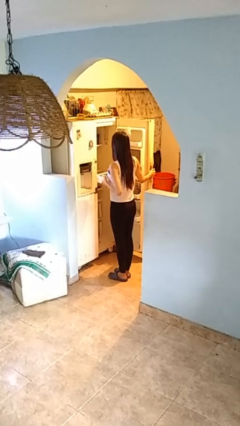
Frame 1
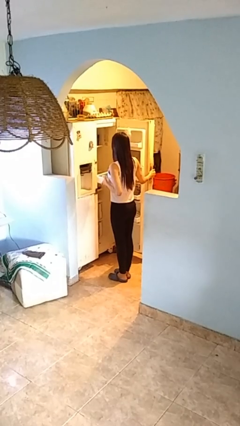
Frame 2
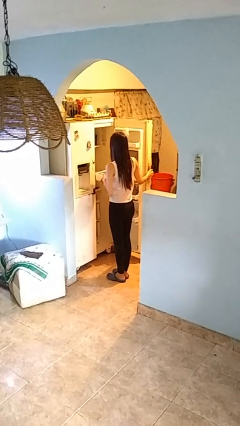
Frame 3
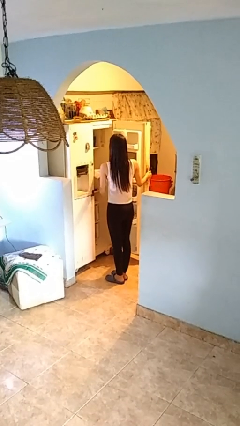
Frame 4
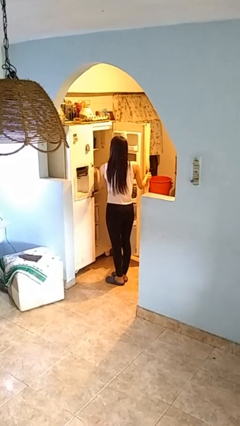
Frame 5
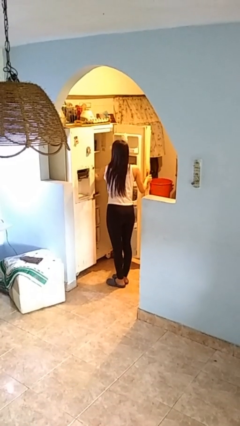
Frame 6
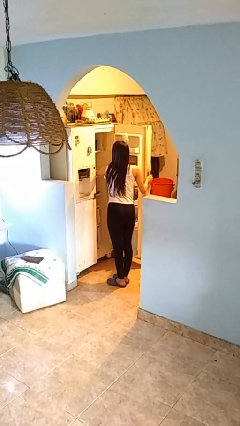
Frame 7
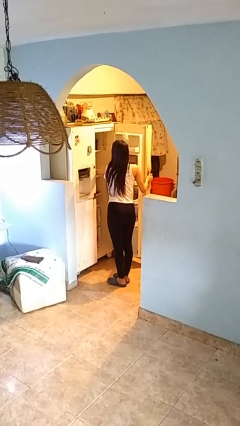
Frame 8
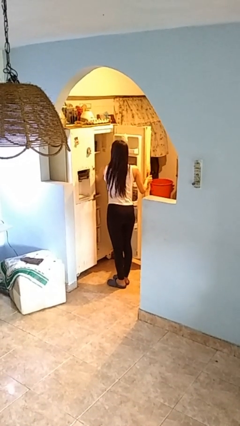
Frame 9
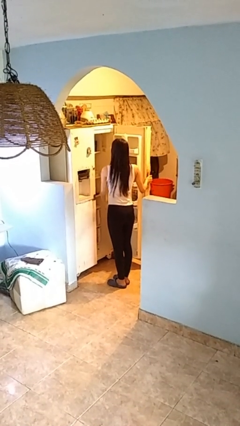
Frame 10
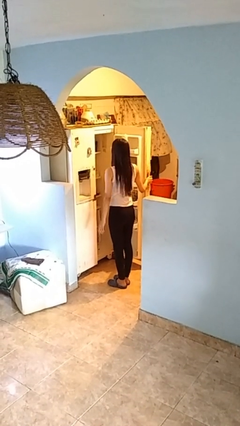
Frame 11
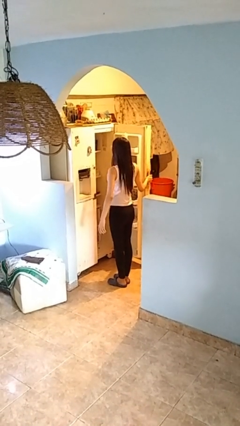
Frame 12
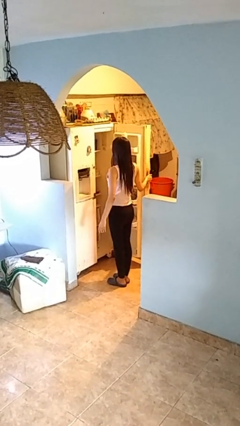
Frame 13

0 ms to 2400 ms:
person puts object into refrigerator

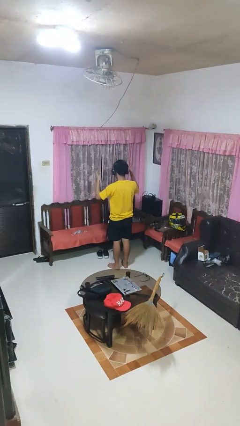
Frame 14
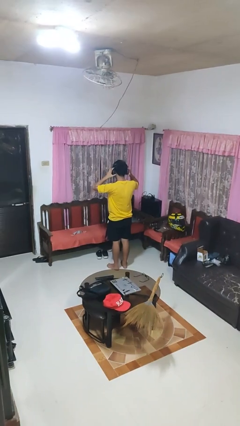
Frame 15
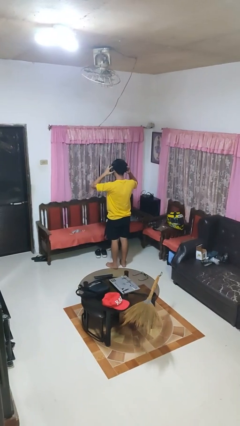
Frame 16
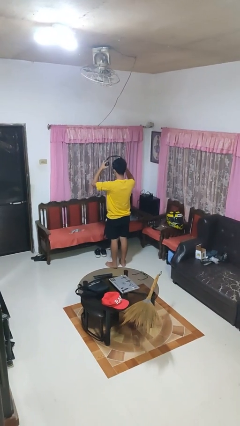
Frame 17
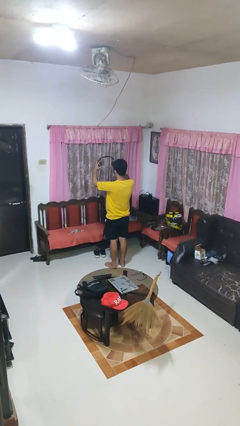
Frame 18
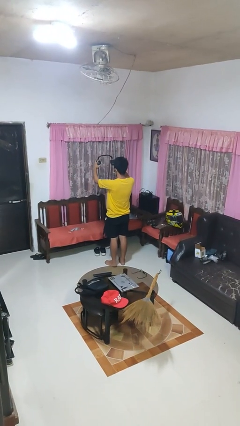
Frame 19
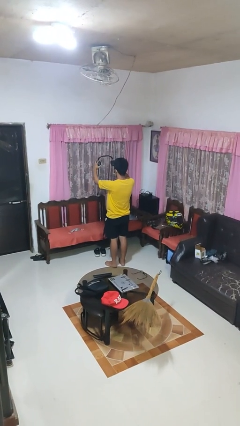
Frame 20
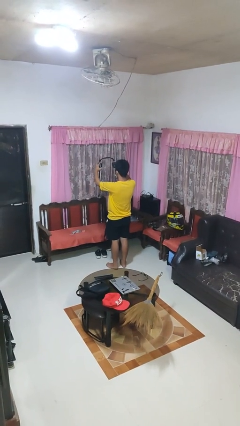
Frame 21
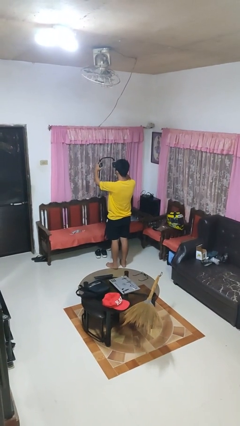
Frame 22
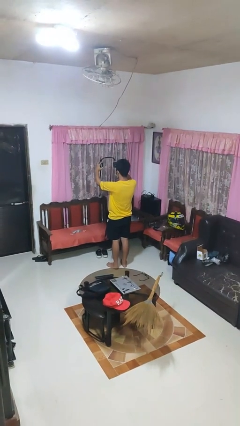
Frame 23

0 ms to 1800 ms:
person takes off headphones

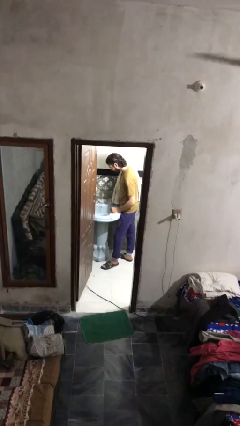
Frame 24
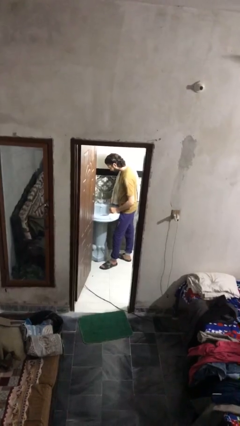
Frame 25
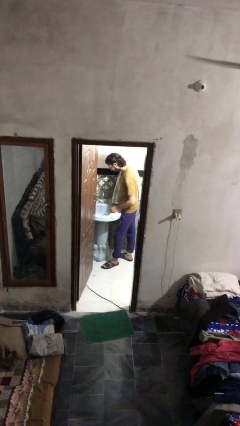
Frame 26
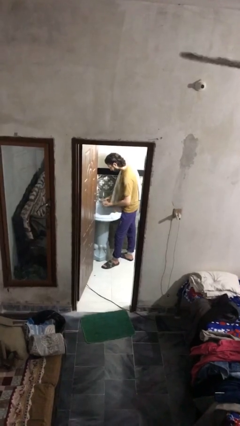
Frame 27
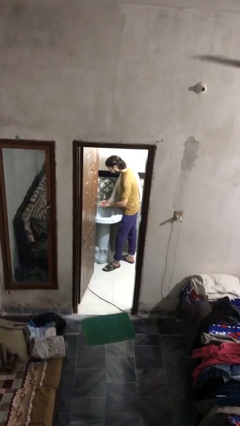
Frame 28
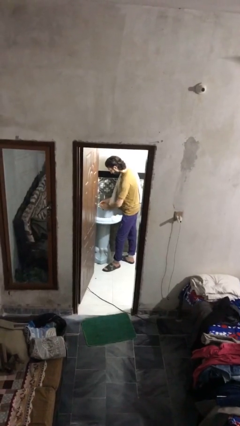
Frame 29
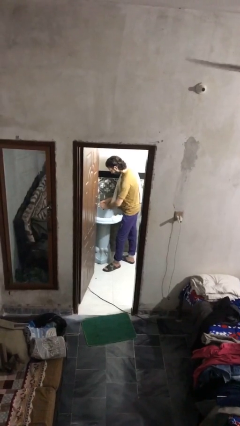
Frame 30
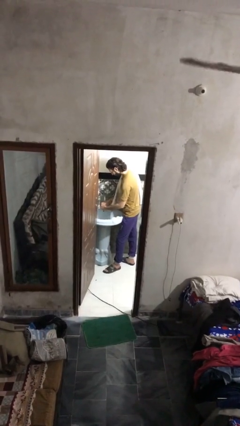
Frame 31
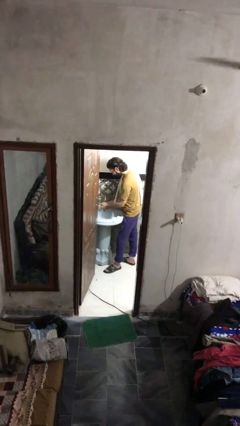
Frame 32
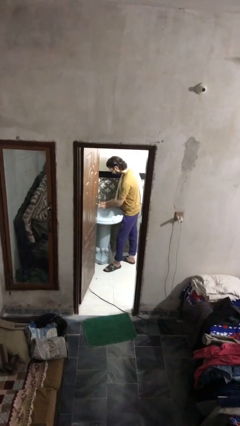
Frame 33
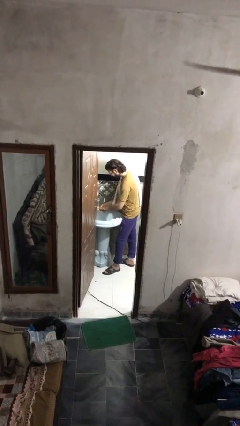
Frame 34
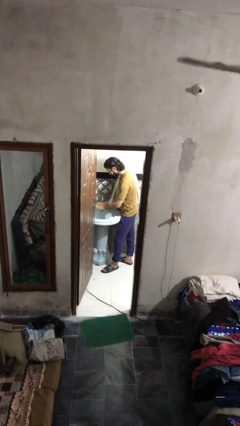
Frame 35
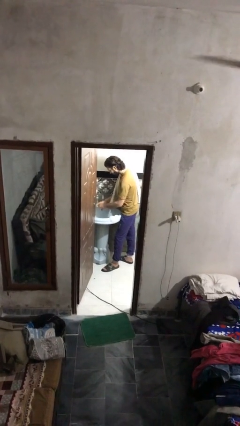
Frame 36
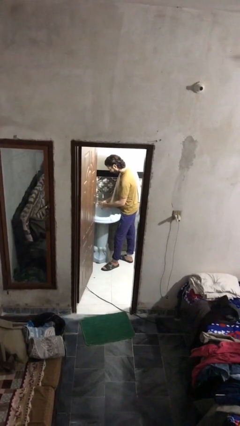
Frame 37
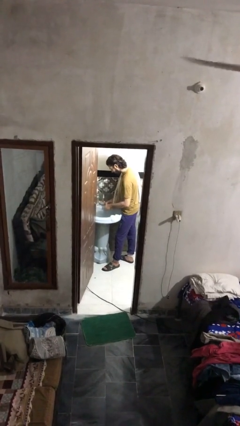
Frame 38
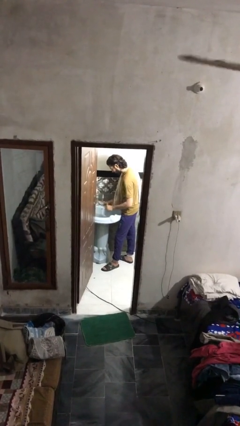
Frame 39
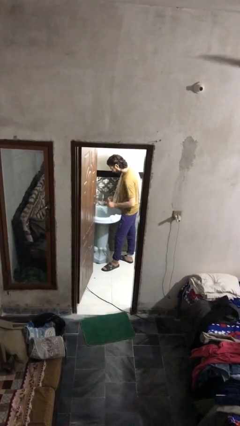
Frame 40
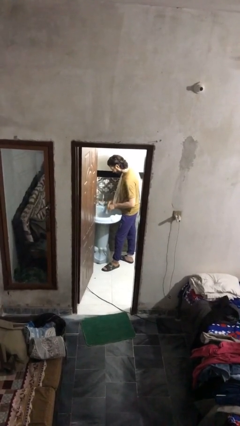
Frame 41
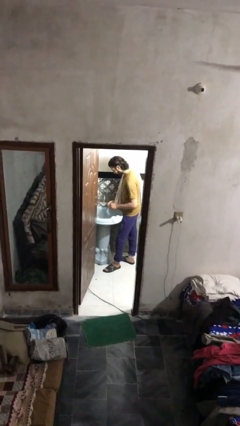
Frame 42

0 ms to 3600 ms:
person washes hands

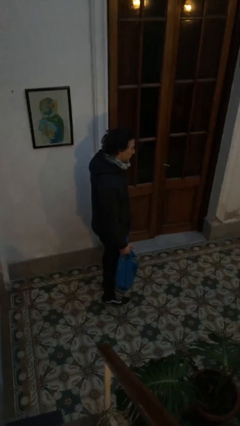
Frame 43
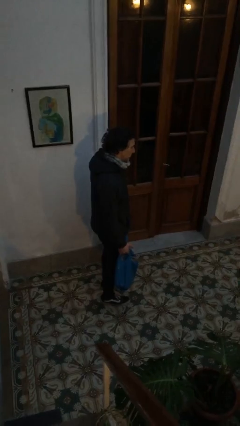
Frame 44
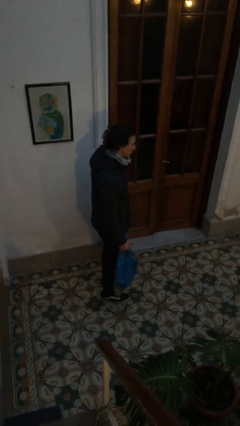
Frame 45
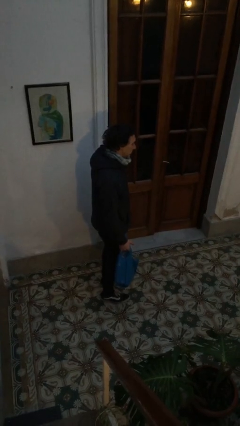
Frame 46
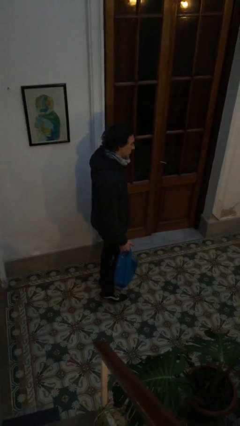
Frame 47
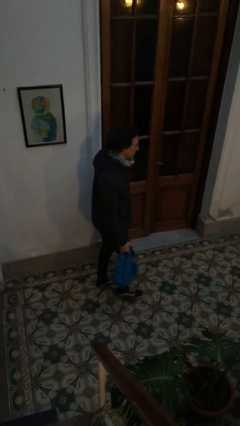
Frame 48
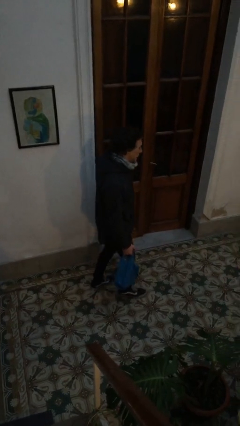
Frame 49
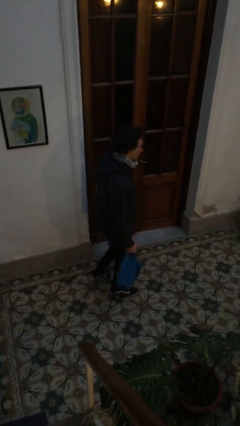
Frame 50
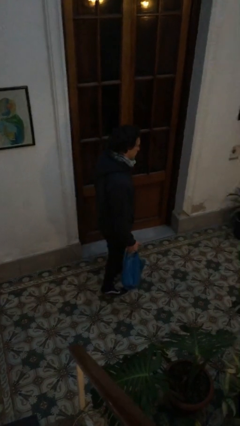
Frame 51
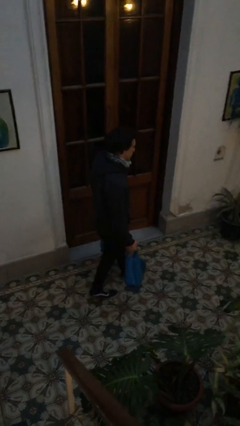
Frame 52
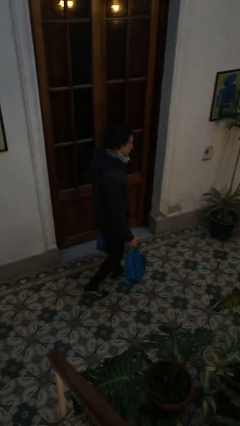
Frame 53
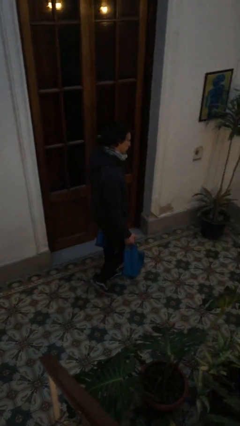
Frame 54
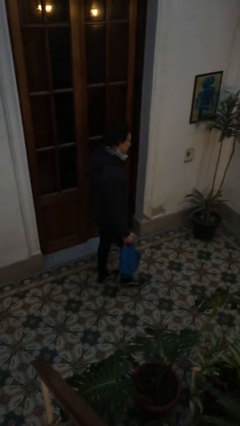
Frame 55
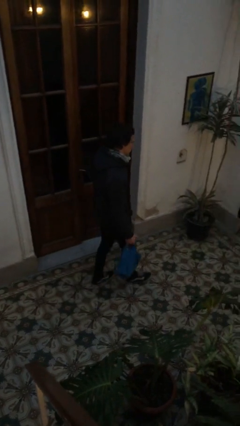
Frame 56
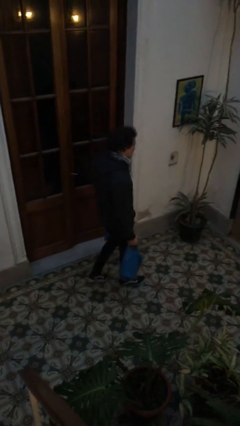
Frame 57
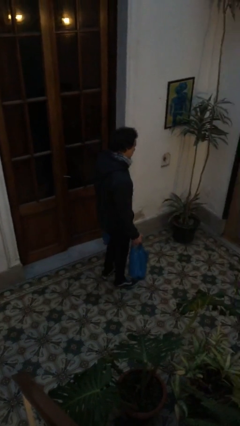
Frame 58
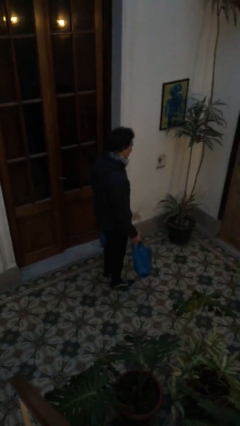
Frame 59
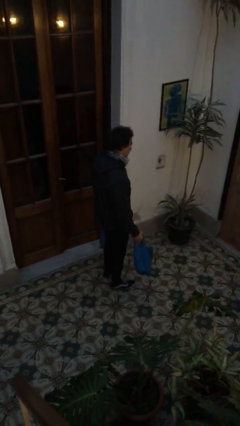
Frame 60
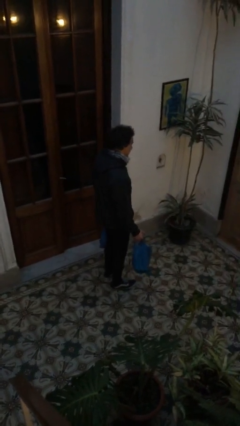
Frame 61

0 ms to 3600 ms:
person carries groceries

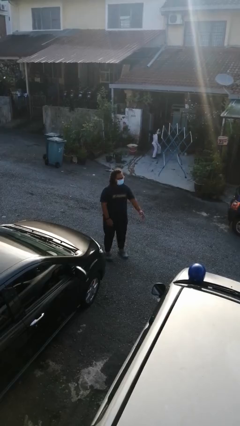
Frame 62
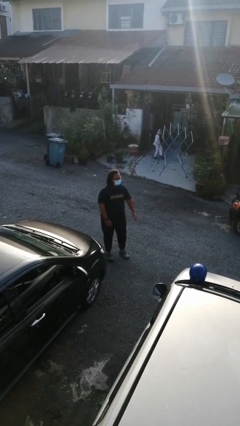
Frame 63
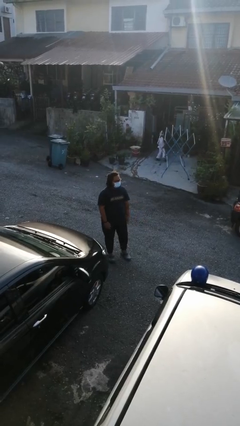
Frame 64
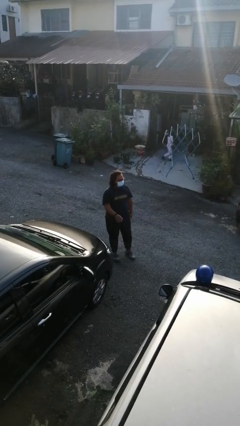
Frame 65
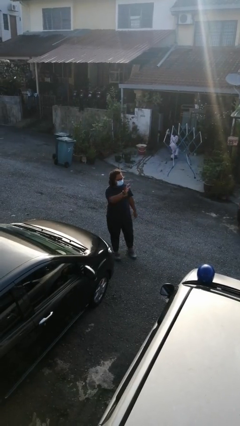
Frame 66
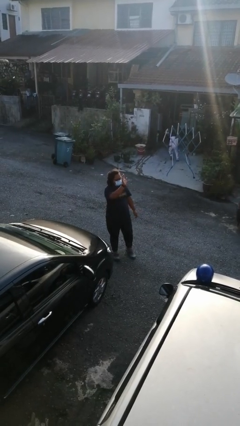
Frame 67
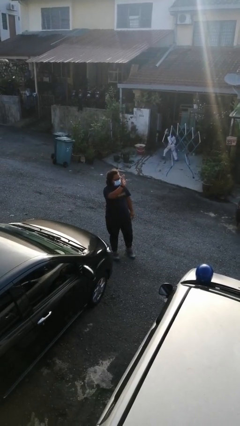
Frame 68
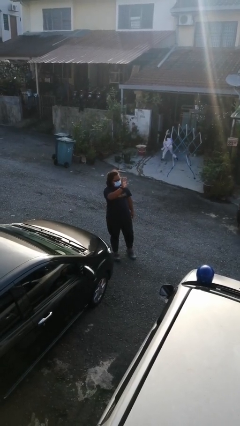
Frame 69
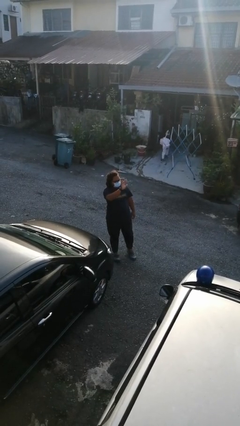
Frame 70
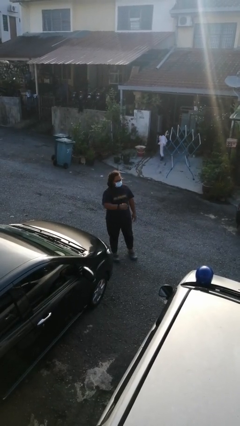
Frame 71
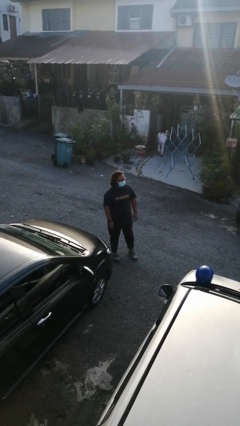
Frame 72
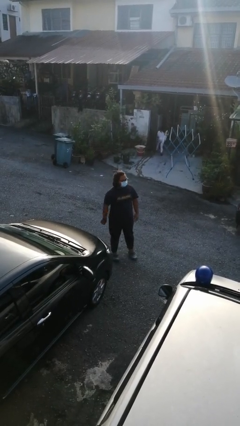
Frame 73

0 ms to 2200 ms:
person waves at person

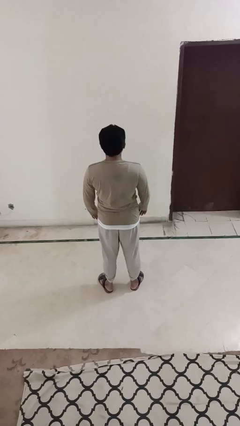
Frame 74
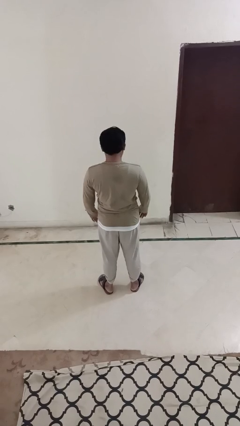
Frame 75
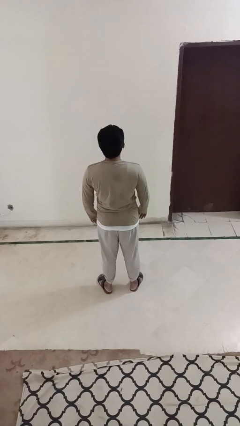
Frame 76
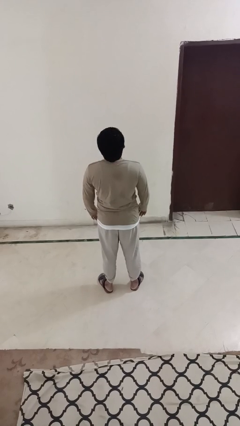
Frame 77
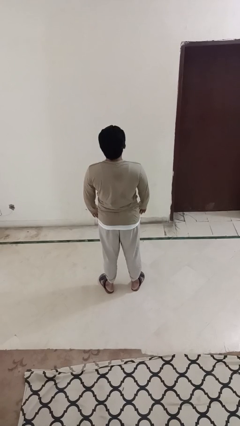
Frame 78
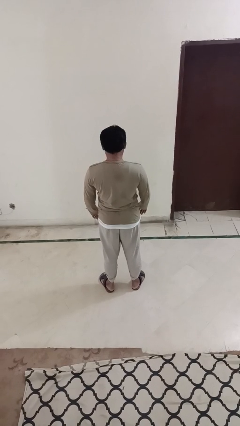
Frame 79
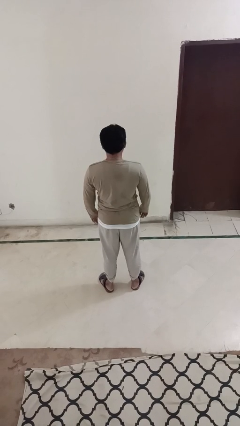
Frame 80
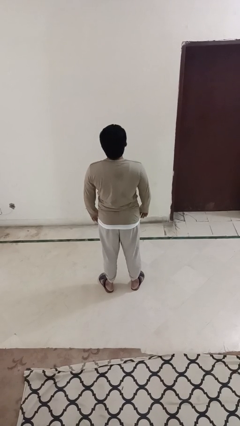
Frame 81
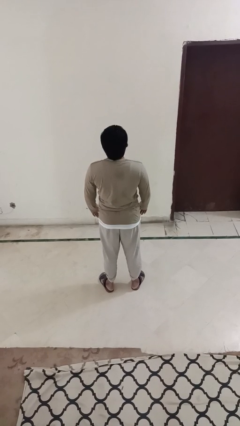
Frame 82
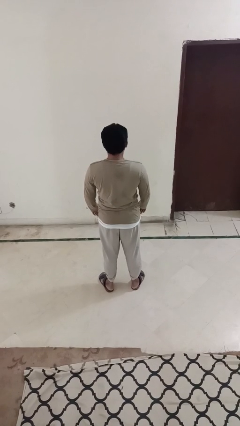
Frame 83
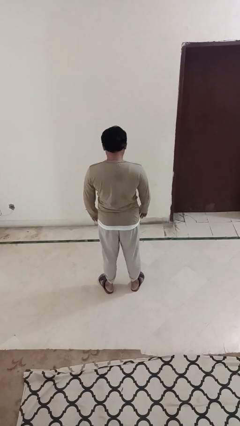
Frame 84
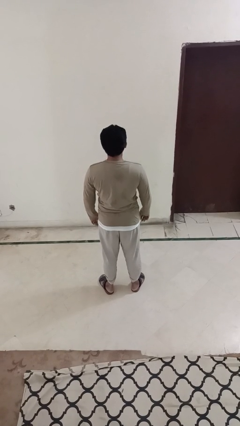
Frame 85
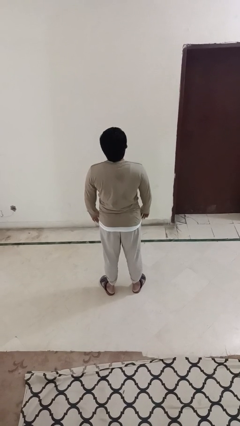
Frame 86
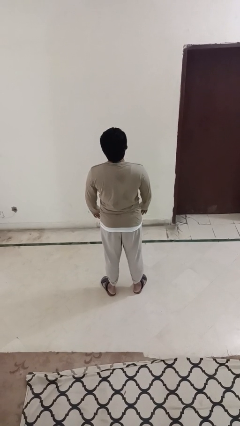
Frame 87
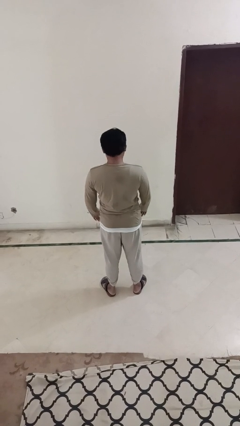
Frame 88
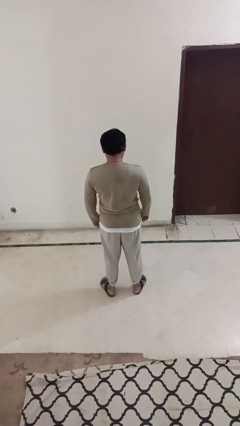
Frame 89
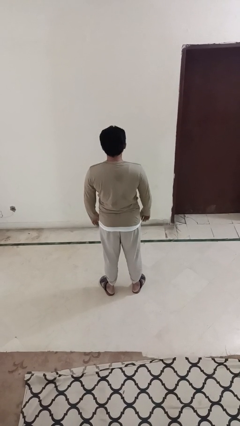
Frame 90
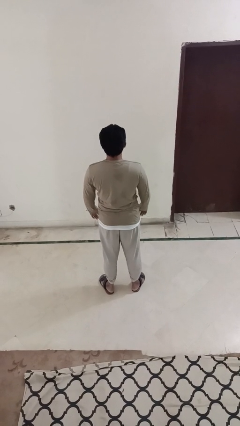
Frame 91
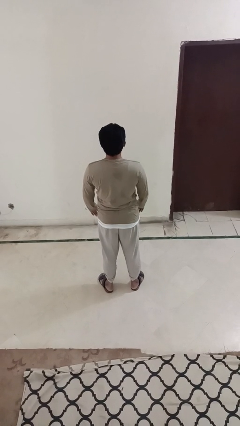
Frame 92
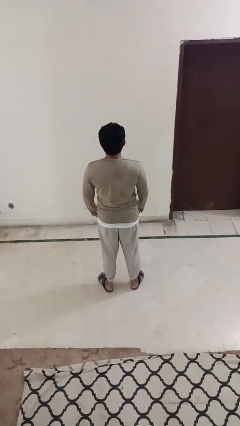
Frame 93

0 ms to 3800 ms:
person nods head
